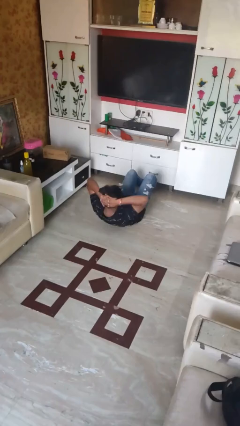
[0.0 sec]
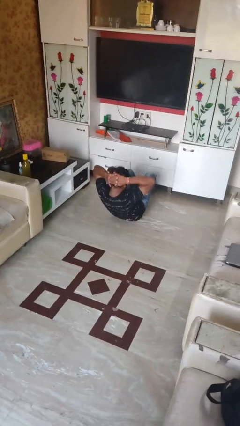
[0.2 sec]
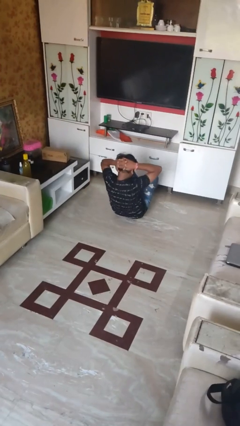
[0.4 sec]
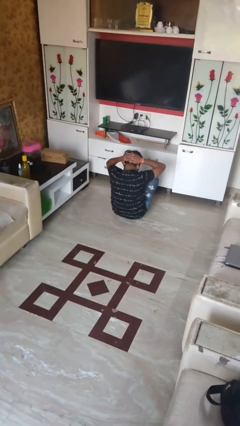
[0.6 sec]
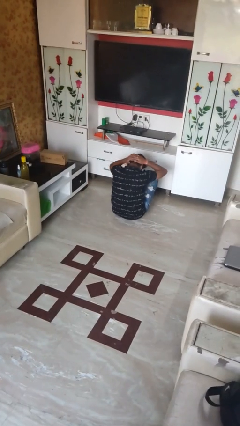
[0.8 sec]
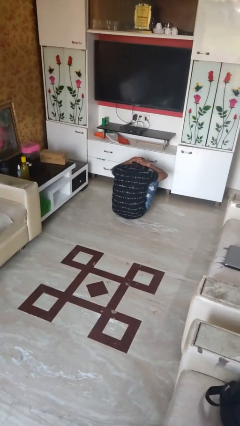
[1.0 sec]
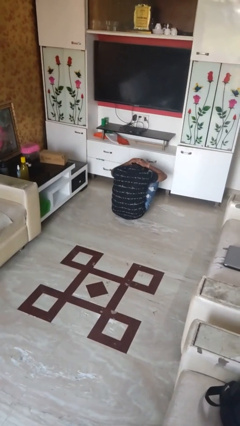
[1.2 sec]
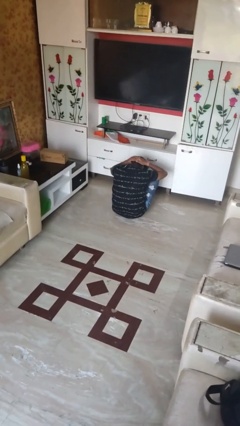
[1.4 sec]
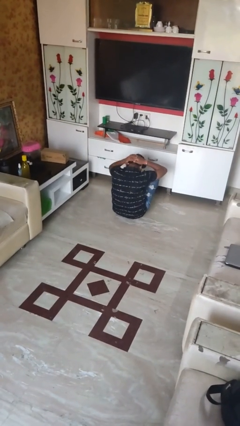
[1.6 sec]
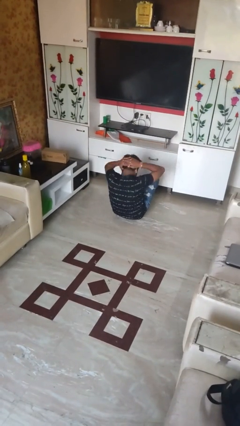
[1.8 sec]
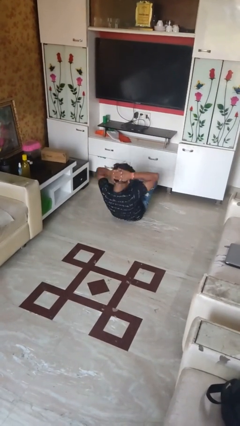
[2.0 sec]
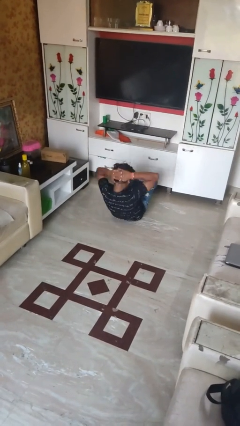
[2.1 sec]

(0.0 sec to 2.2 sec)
person exercises with situp

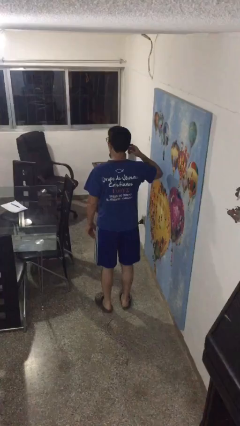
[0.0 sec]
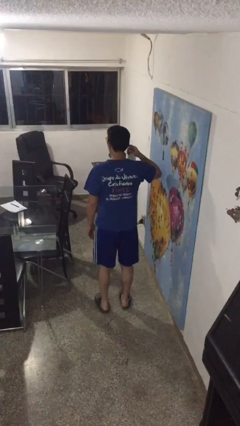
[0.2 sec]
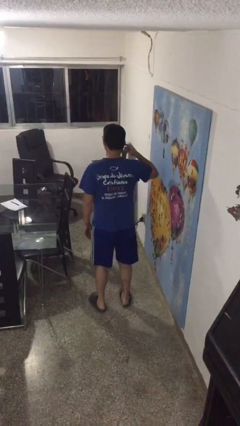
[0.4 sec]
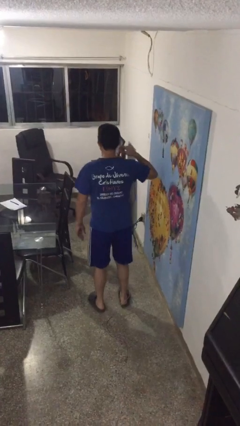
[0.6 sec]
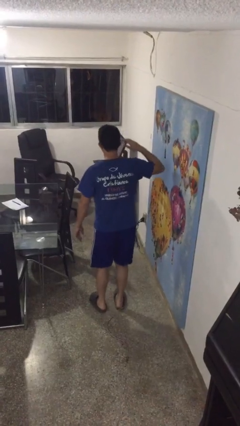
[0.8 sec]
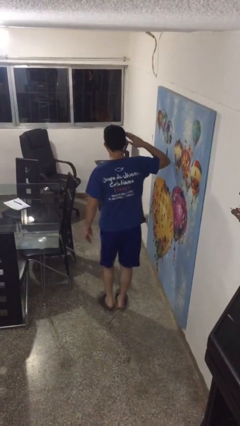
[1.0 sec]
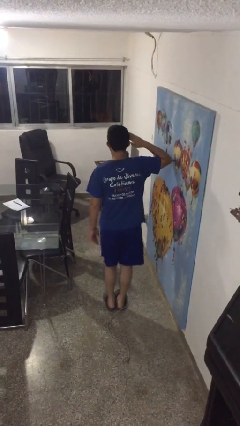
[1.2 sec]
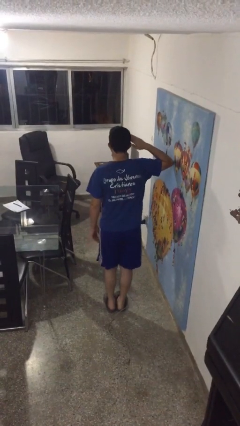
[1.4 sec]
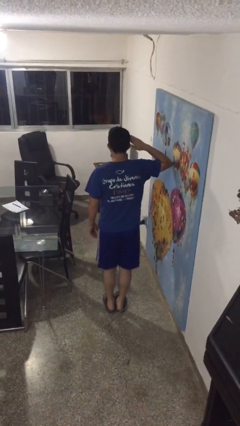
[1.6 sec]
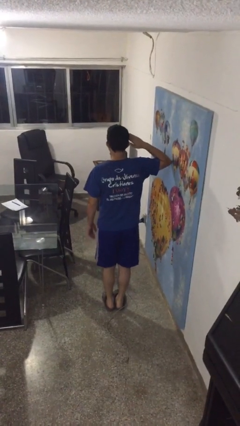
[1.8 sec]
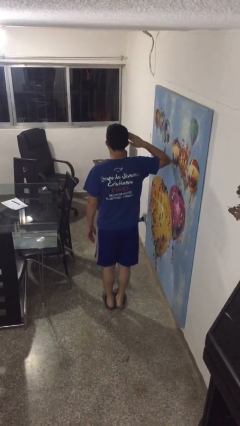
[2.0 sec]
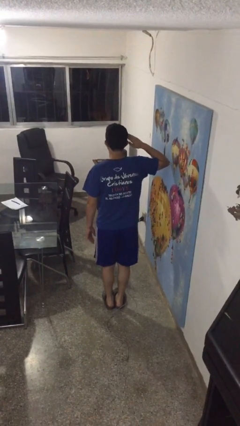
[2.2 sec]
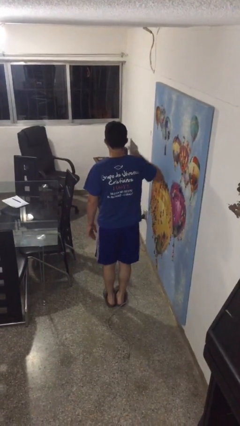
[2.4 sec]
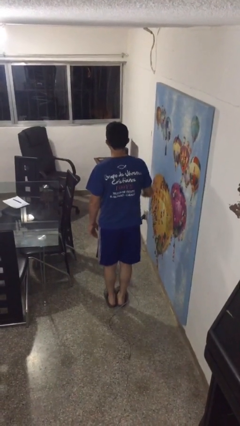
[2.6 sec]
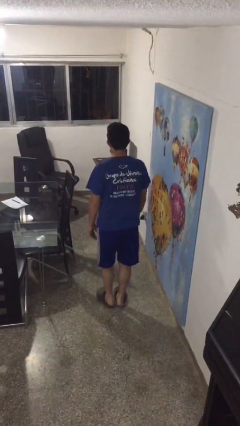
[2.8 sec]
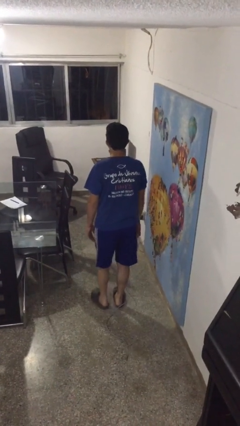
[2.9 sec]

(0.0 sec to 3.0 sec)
person salutes

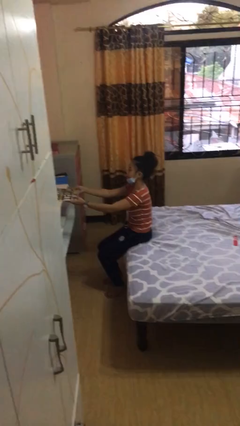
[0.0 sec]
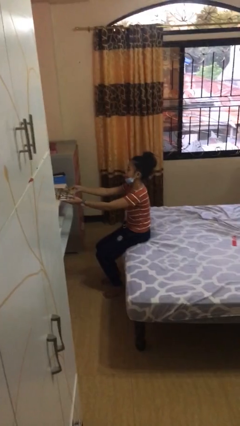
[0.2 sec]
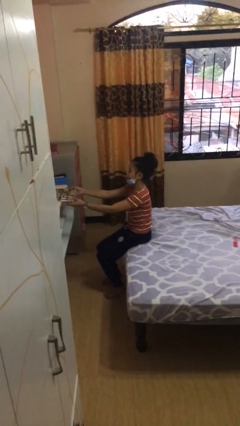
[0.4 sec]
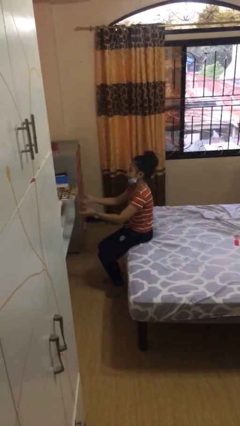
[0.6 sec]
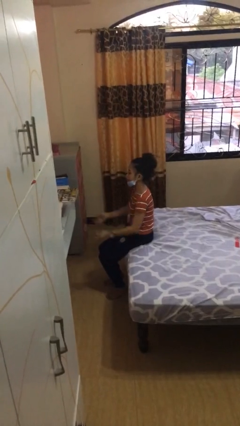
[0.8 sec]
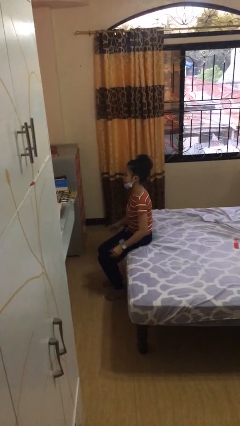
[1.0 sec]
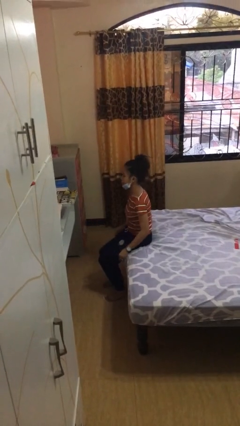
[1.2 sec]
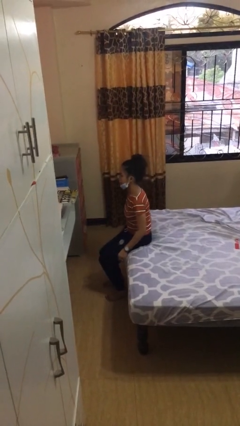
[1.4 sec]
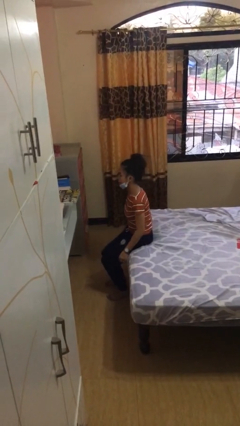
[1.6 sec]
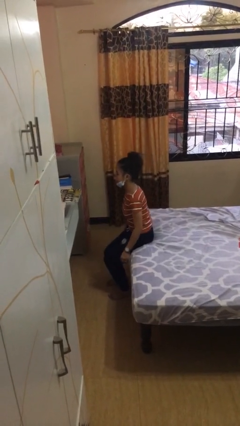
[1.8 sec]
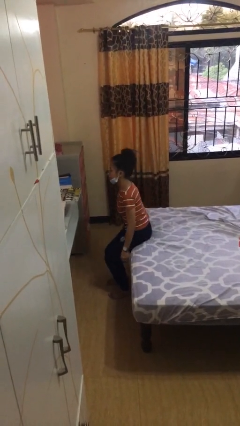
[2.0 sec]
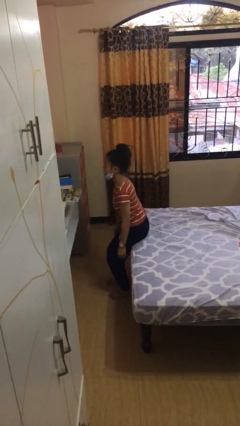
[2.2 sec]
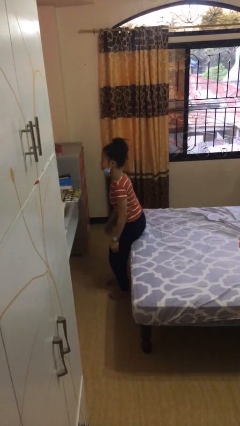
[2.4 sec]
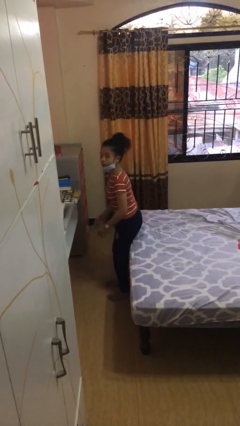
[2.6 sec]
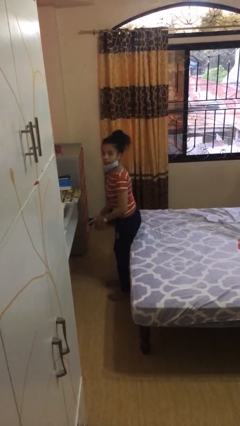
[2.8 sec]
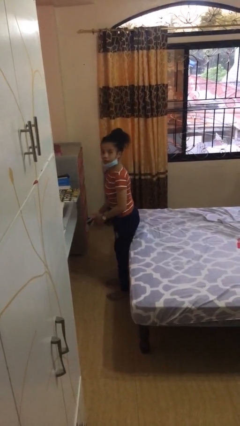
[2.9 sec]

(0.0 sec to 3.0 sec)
person stands up

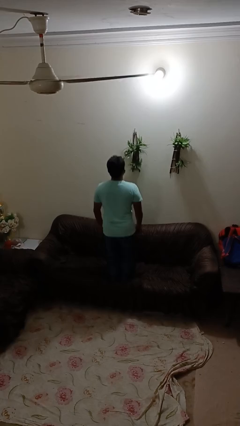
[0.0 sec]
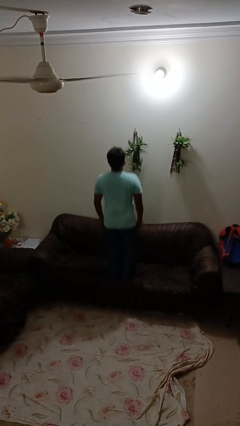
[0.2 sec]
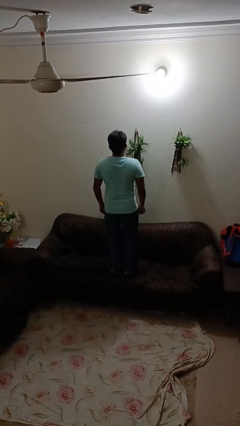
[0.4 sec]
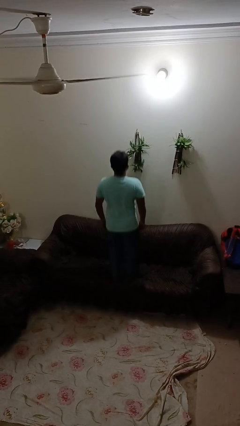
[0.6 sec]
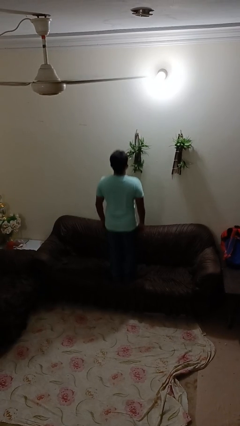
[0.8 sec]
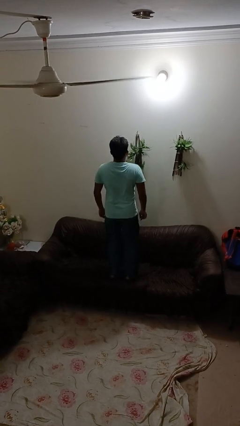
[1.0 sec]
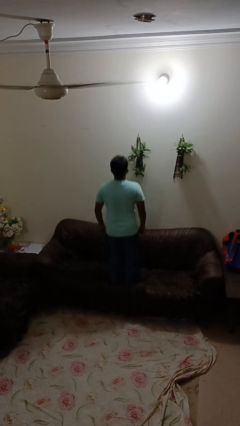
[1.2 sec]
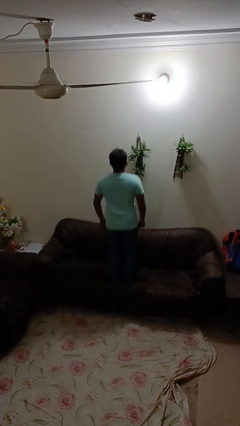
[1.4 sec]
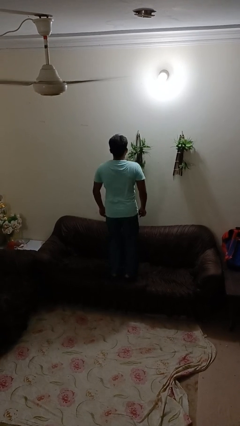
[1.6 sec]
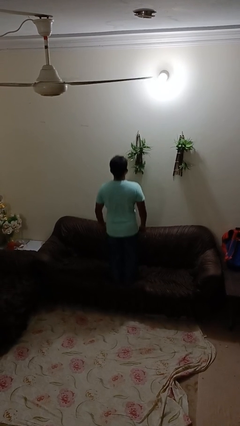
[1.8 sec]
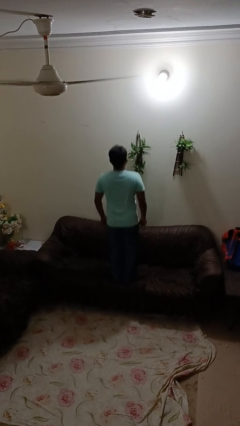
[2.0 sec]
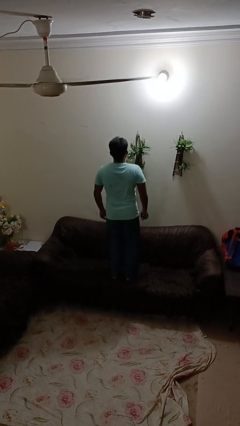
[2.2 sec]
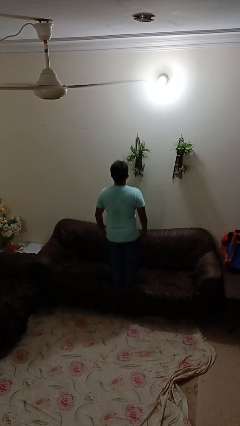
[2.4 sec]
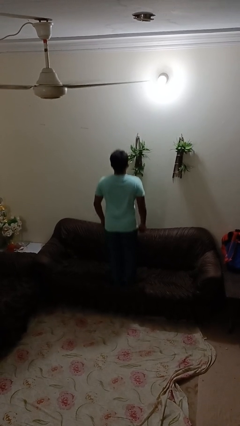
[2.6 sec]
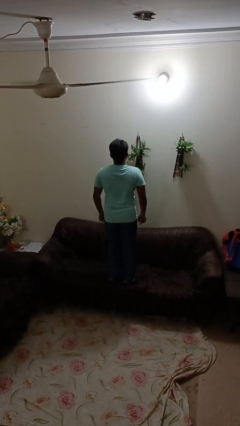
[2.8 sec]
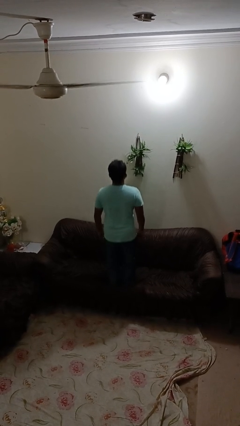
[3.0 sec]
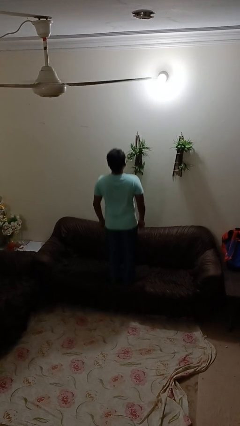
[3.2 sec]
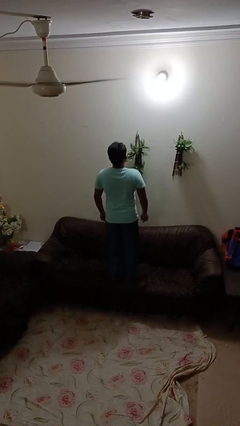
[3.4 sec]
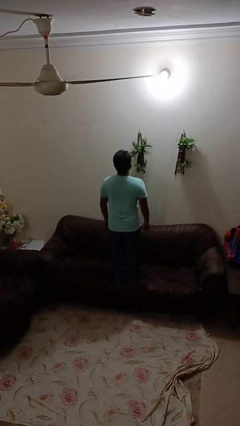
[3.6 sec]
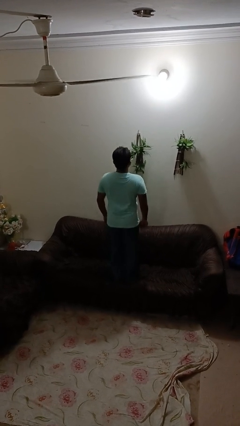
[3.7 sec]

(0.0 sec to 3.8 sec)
person jumps on couch

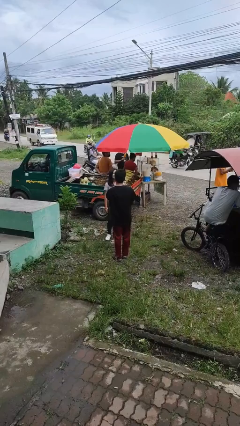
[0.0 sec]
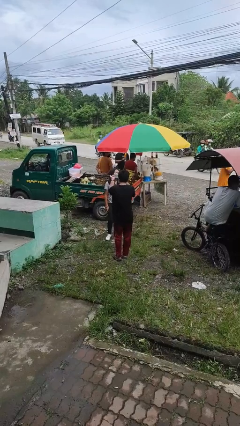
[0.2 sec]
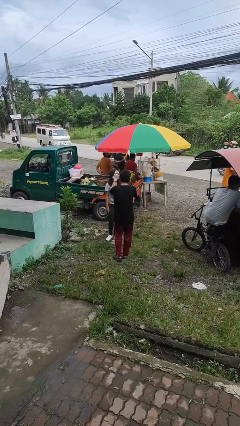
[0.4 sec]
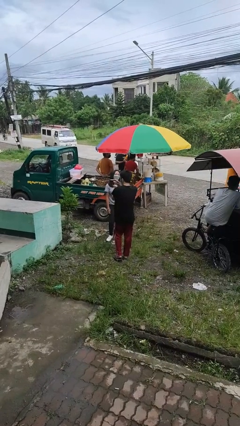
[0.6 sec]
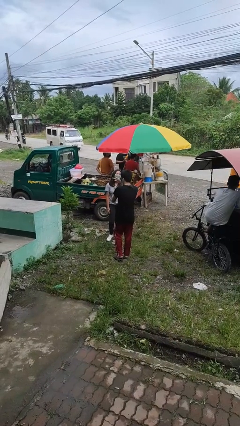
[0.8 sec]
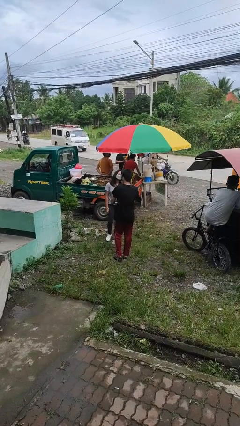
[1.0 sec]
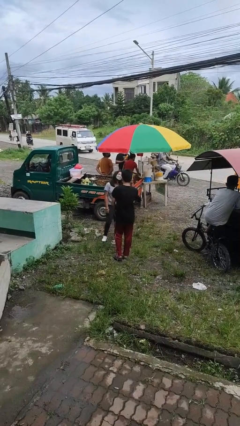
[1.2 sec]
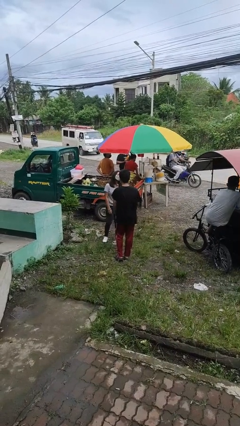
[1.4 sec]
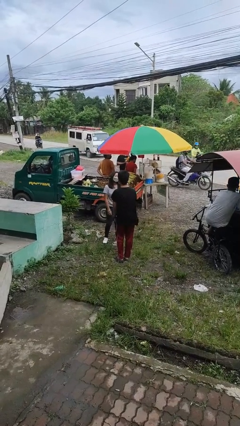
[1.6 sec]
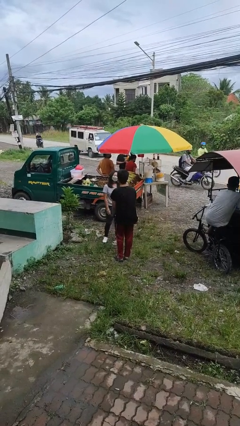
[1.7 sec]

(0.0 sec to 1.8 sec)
person talks to person

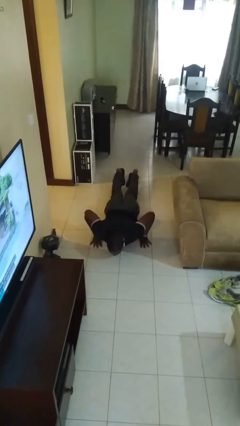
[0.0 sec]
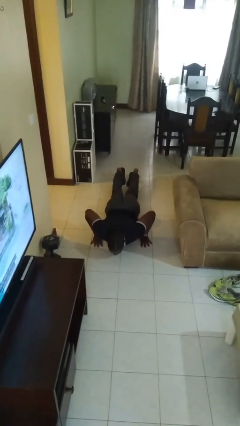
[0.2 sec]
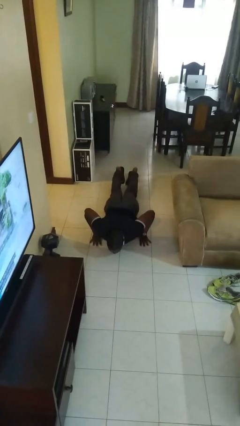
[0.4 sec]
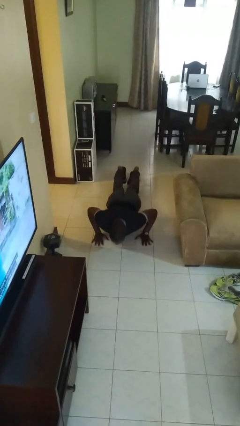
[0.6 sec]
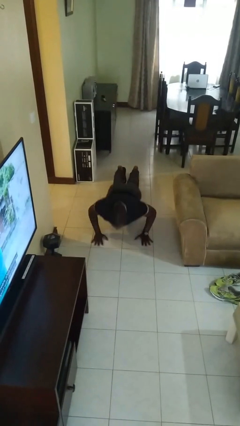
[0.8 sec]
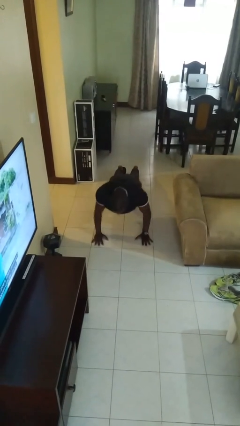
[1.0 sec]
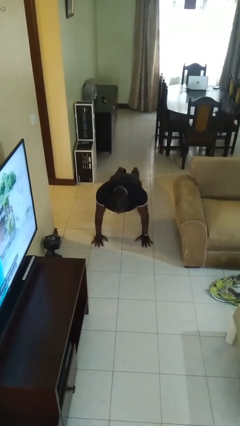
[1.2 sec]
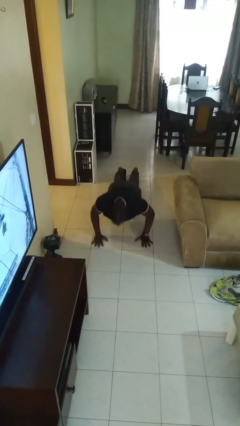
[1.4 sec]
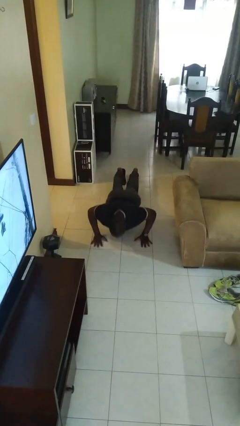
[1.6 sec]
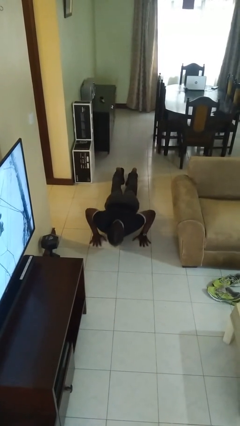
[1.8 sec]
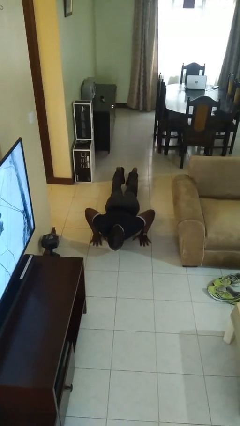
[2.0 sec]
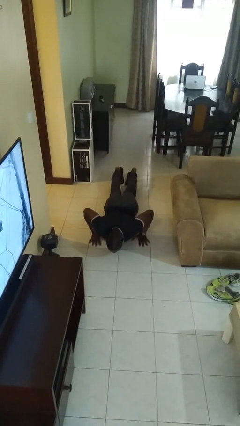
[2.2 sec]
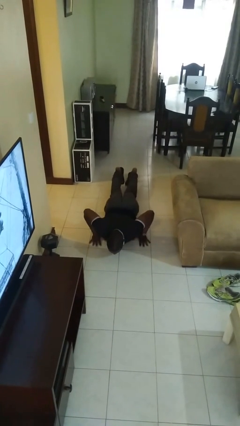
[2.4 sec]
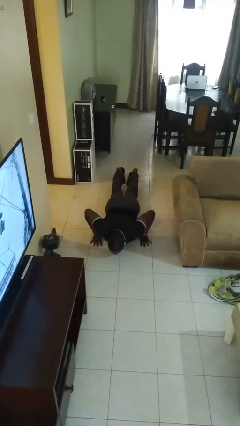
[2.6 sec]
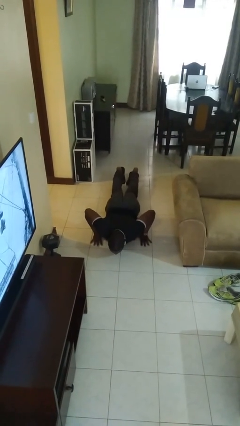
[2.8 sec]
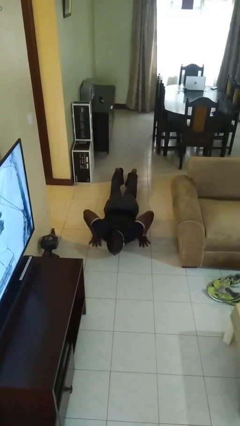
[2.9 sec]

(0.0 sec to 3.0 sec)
person exercises with pushup
